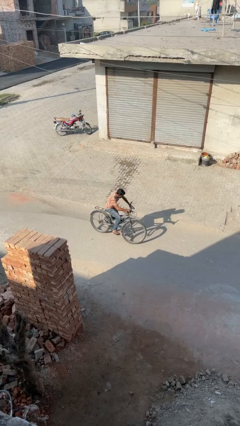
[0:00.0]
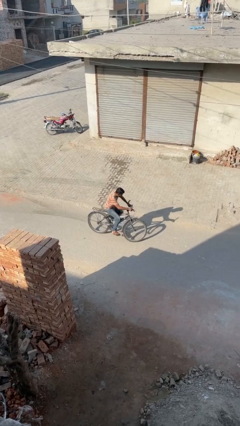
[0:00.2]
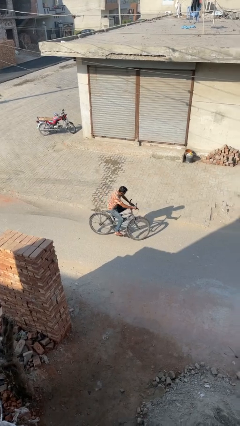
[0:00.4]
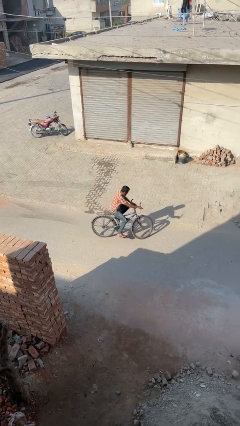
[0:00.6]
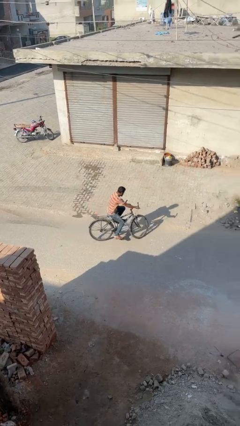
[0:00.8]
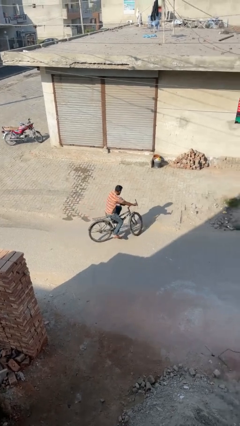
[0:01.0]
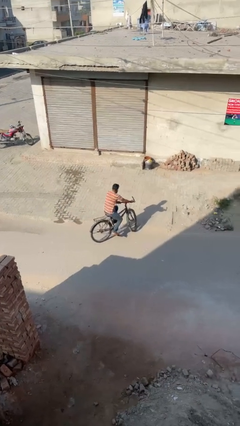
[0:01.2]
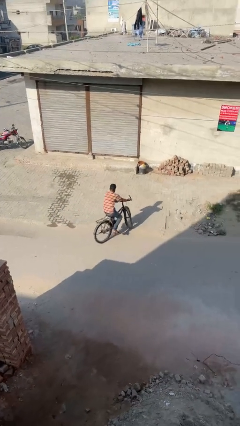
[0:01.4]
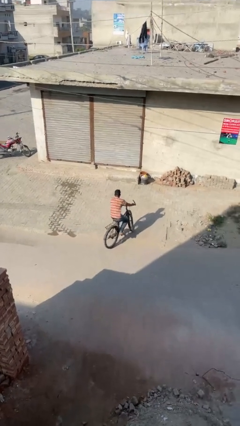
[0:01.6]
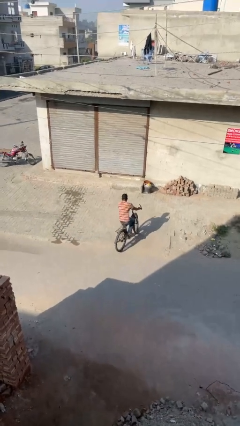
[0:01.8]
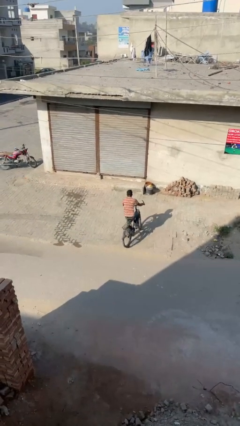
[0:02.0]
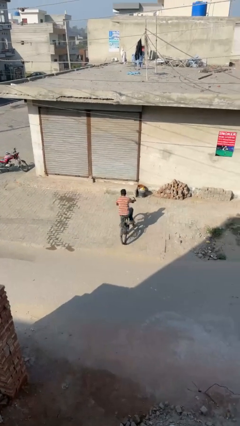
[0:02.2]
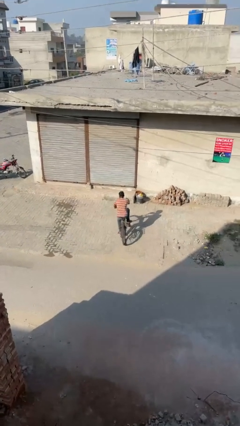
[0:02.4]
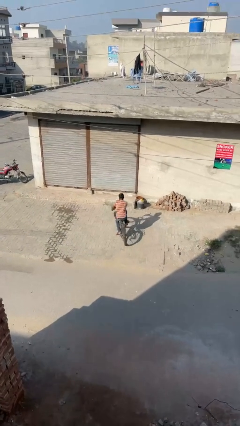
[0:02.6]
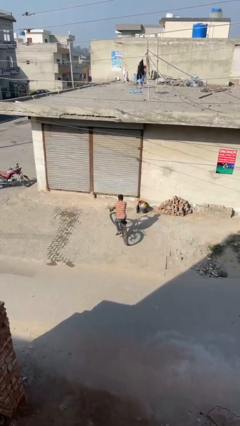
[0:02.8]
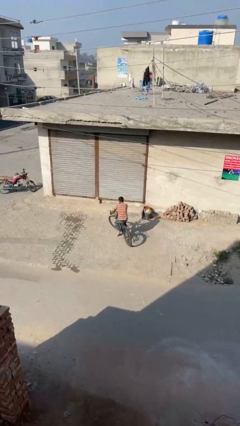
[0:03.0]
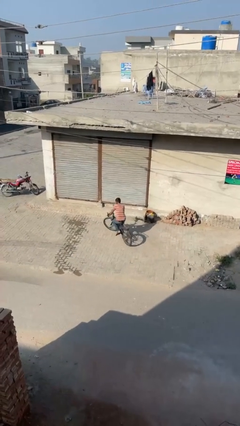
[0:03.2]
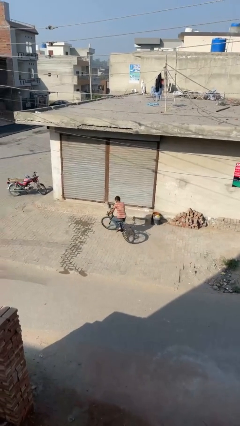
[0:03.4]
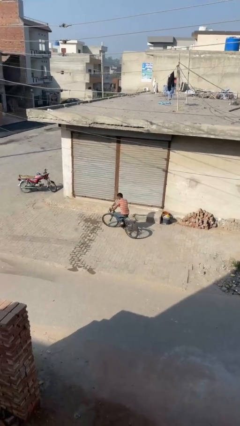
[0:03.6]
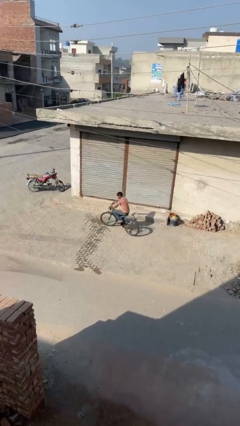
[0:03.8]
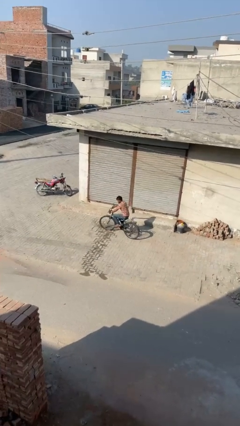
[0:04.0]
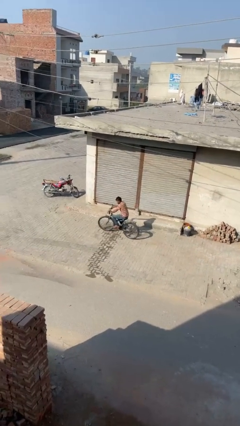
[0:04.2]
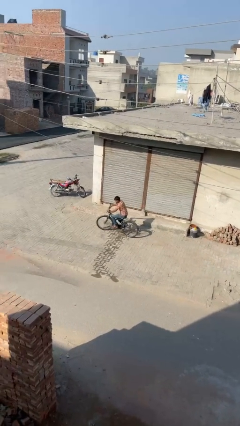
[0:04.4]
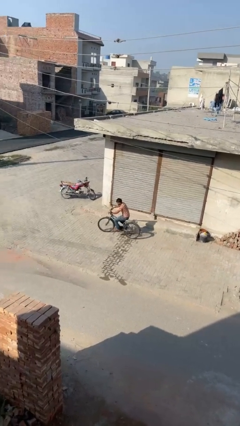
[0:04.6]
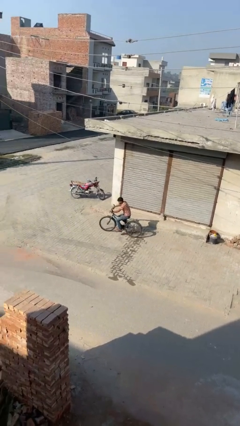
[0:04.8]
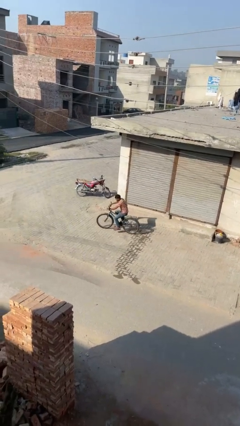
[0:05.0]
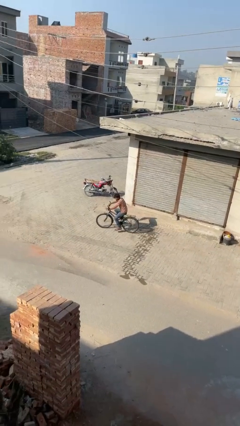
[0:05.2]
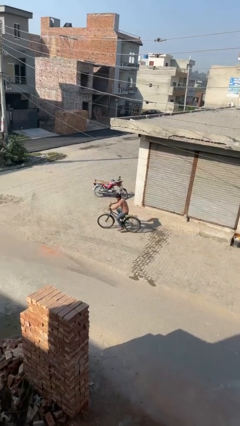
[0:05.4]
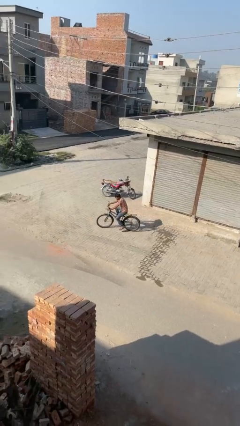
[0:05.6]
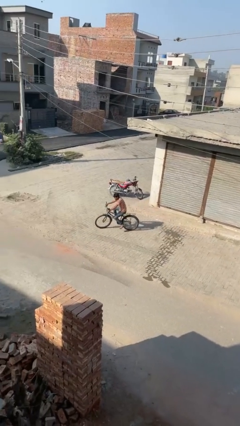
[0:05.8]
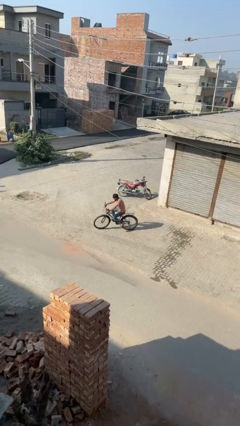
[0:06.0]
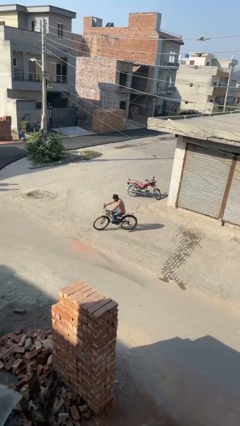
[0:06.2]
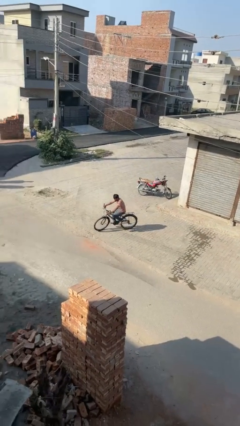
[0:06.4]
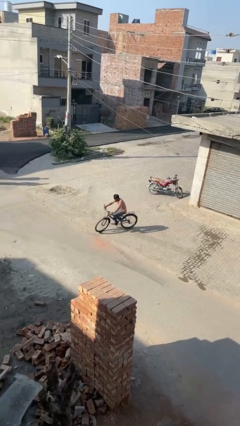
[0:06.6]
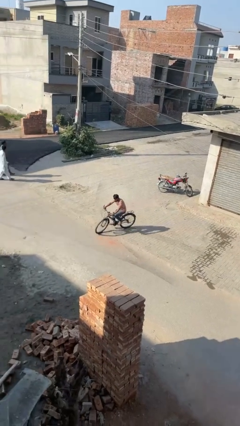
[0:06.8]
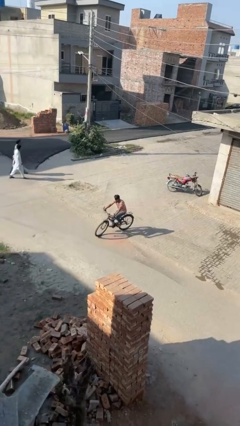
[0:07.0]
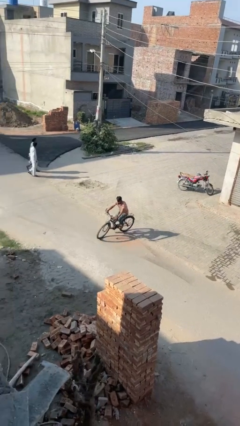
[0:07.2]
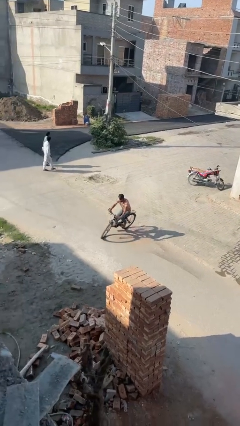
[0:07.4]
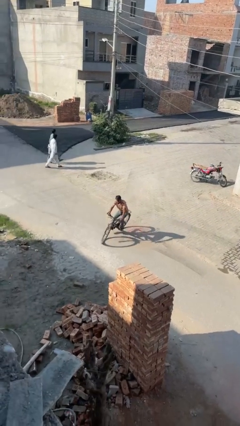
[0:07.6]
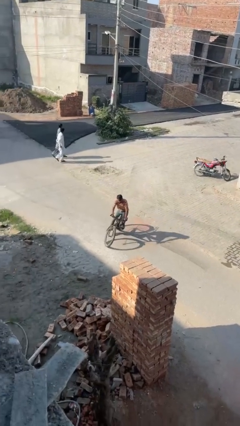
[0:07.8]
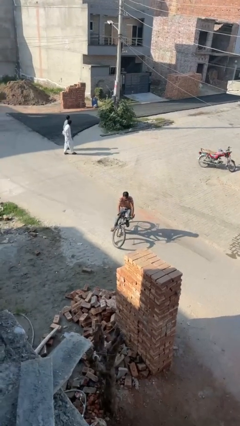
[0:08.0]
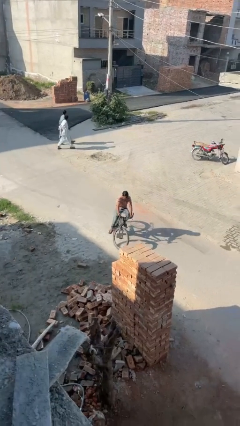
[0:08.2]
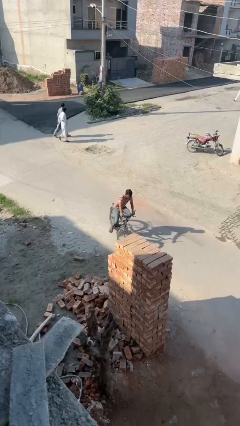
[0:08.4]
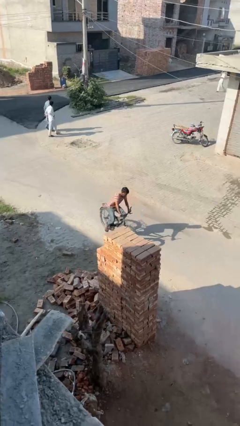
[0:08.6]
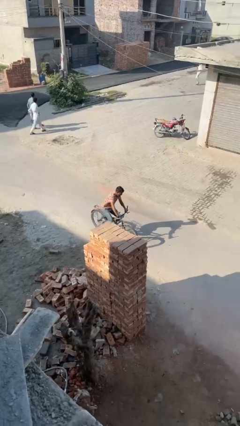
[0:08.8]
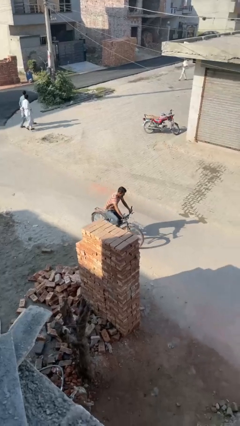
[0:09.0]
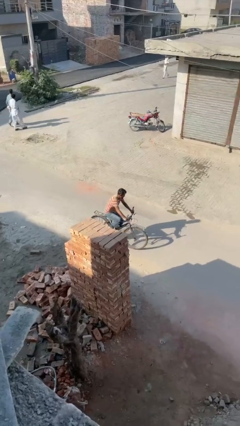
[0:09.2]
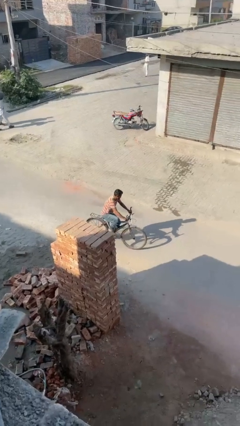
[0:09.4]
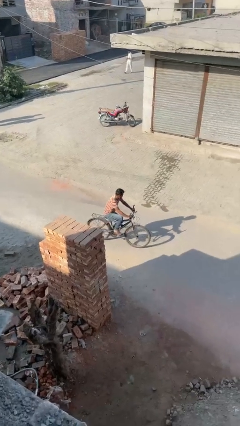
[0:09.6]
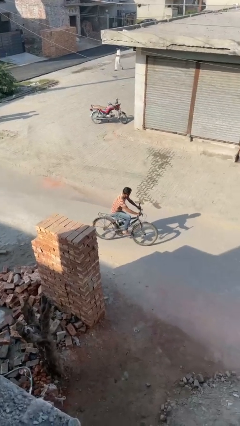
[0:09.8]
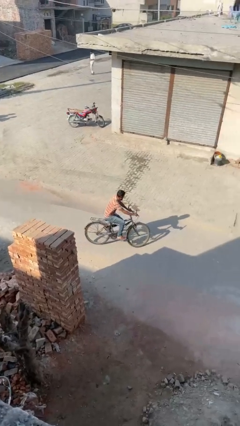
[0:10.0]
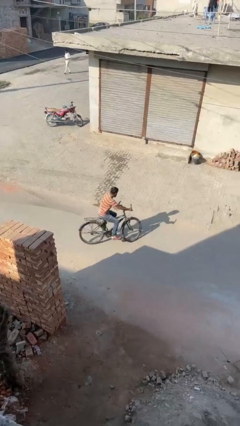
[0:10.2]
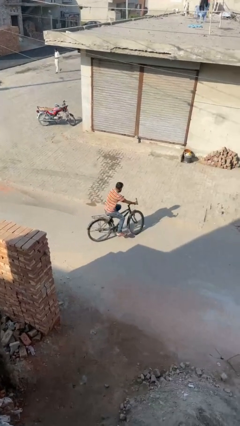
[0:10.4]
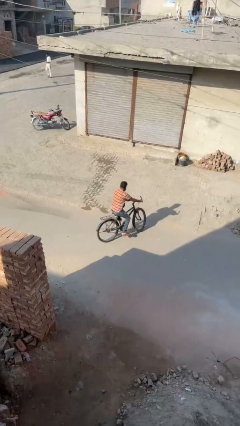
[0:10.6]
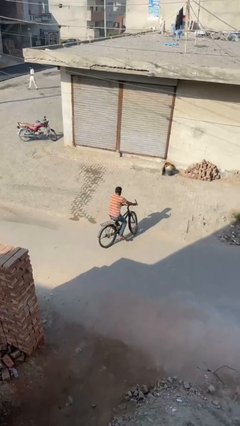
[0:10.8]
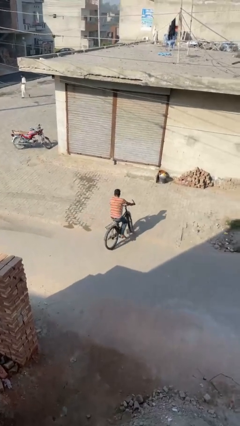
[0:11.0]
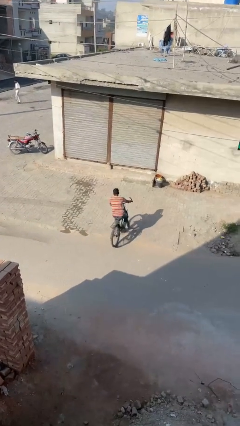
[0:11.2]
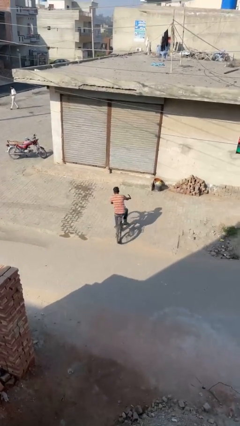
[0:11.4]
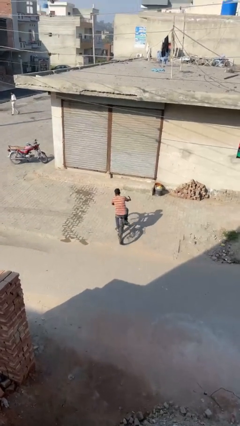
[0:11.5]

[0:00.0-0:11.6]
person rides bicycle

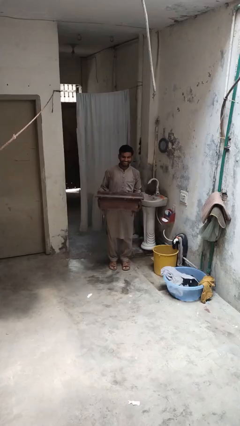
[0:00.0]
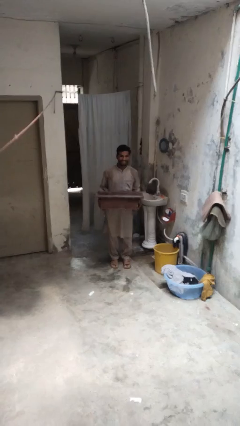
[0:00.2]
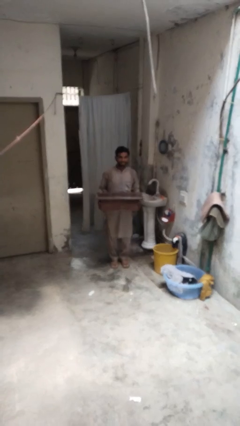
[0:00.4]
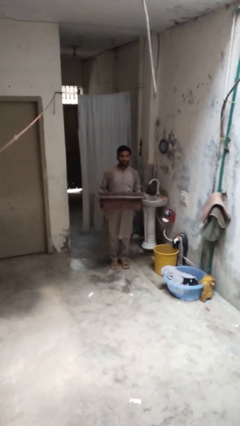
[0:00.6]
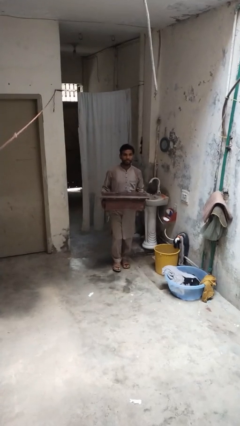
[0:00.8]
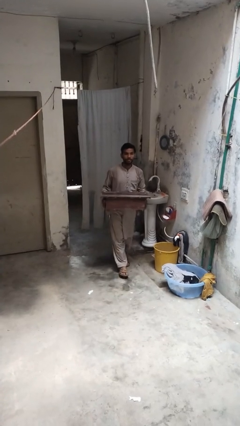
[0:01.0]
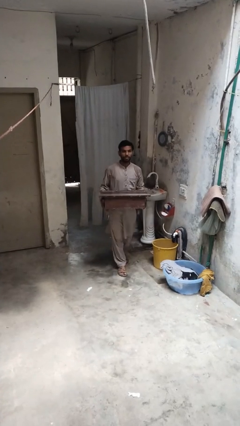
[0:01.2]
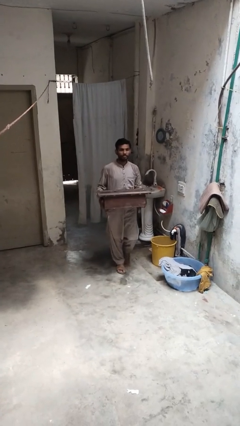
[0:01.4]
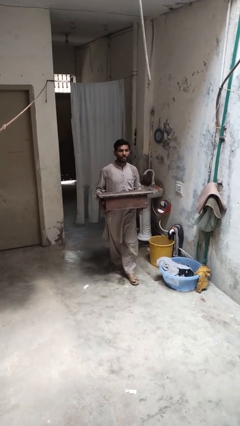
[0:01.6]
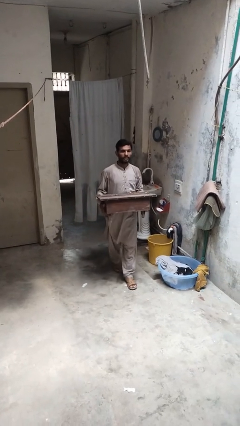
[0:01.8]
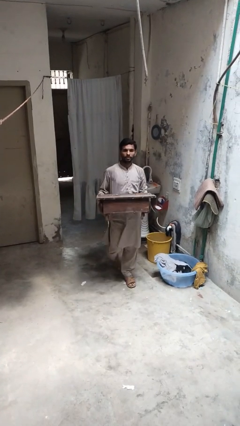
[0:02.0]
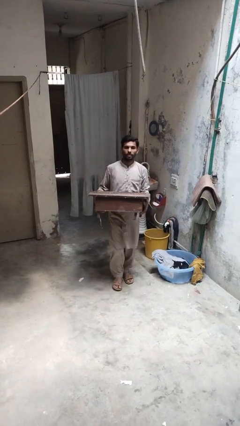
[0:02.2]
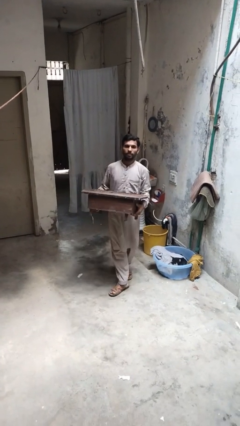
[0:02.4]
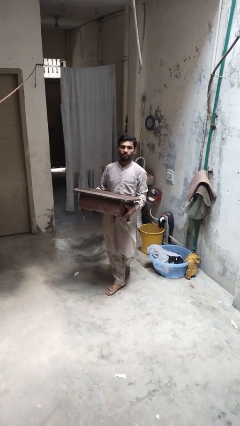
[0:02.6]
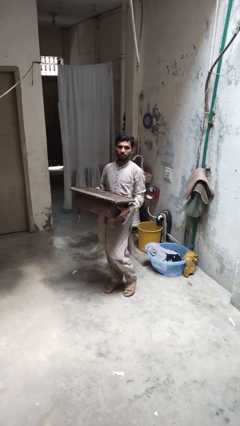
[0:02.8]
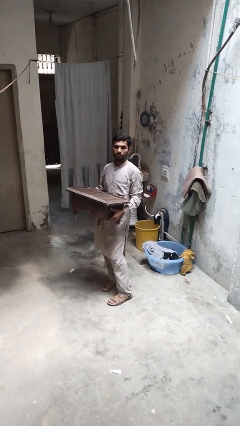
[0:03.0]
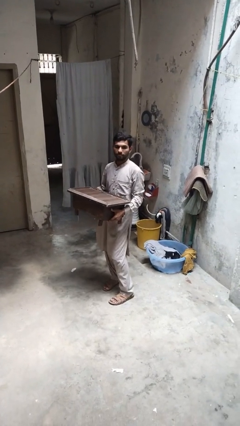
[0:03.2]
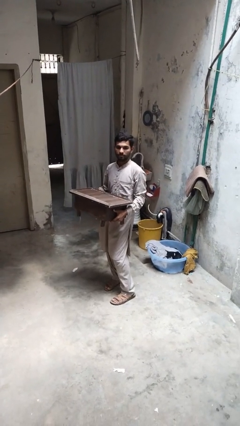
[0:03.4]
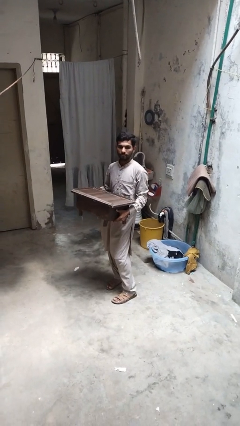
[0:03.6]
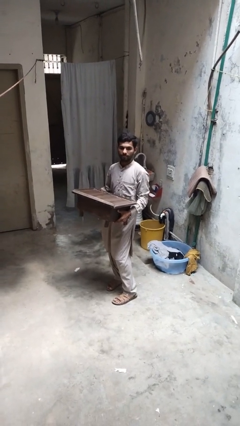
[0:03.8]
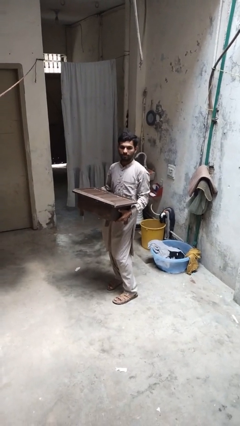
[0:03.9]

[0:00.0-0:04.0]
person carries furniture

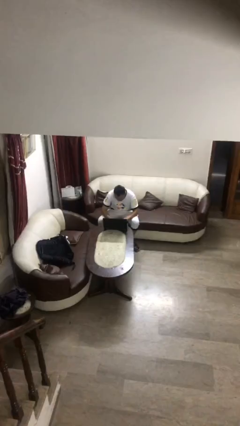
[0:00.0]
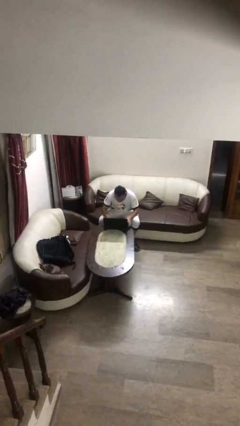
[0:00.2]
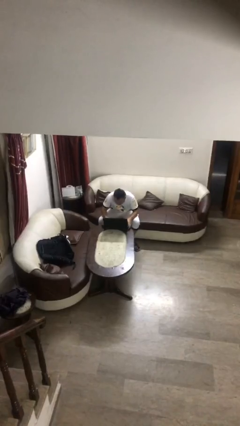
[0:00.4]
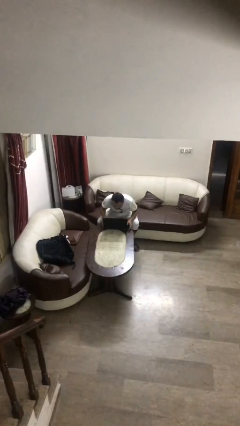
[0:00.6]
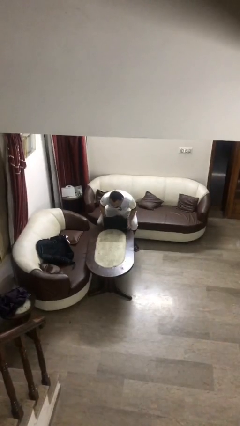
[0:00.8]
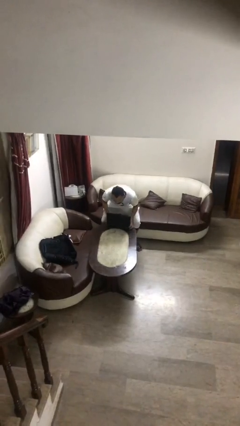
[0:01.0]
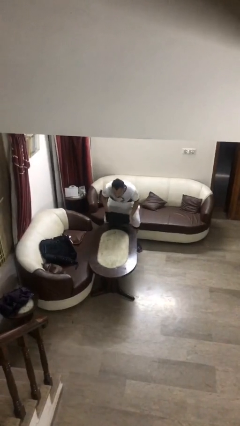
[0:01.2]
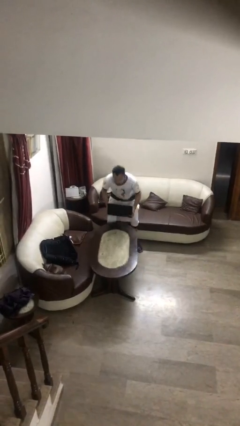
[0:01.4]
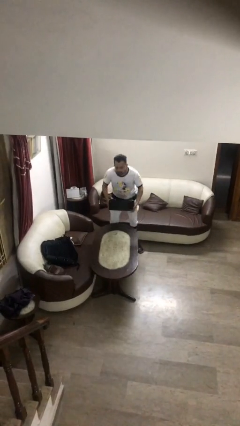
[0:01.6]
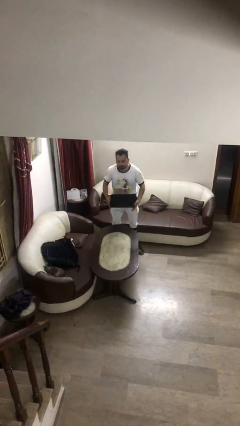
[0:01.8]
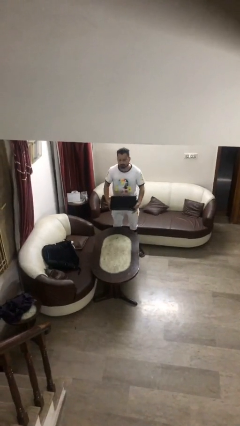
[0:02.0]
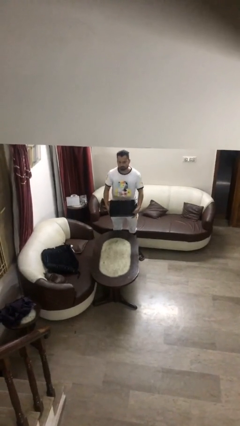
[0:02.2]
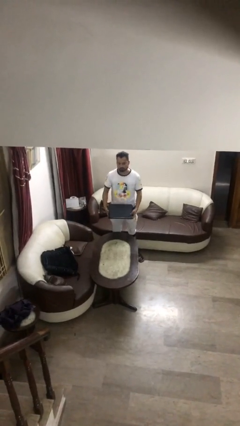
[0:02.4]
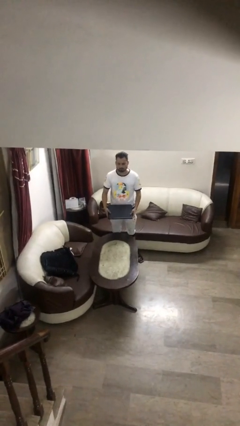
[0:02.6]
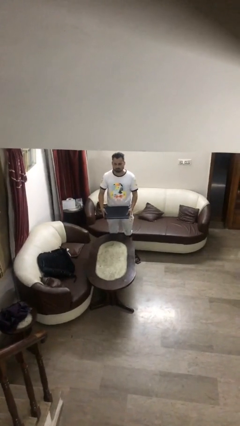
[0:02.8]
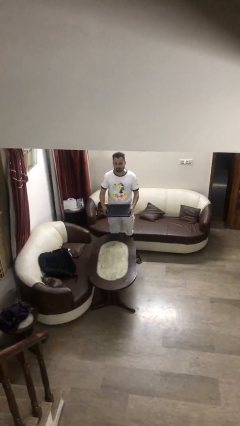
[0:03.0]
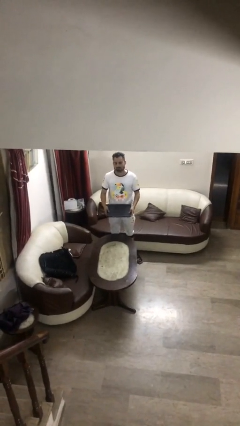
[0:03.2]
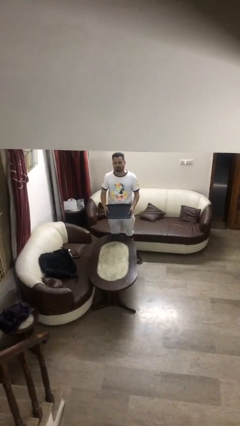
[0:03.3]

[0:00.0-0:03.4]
person stands up
